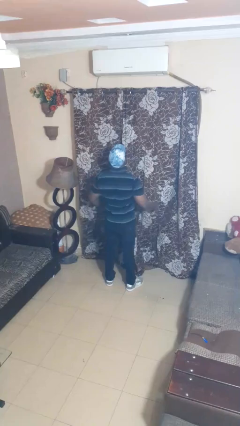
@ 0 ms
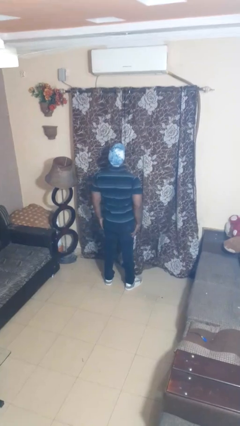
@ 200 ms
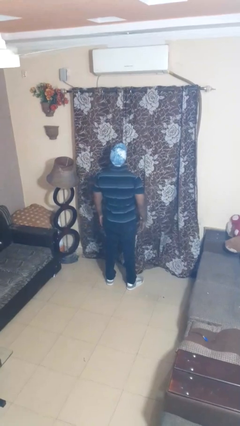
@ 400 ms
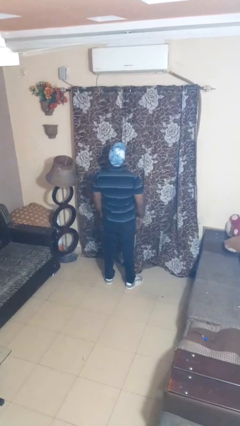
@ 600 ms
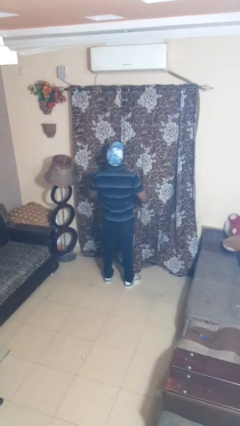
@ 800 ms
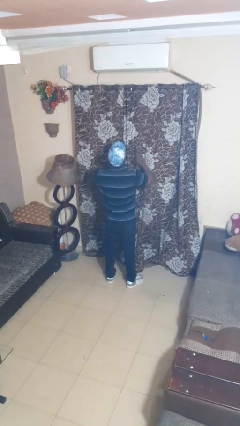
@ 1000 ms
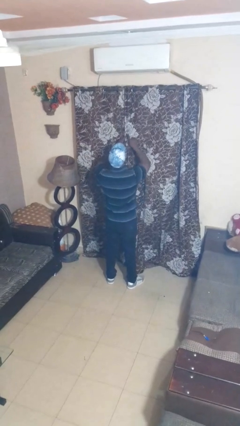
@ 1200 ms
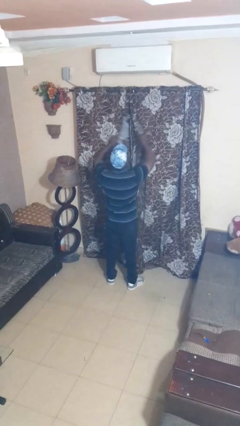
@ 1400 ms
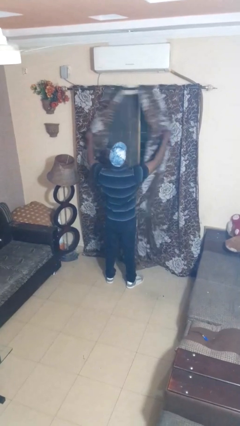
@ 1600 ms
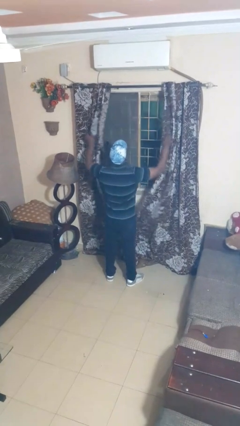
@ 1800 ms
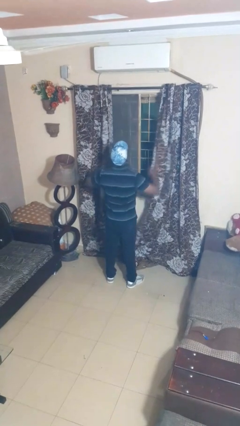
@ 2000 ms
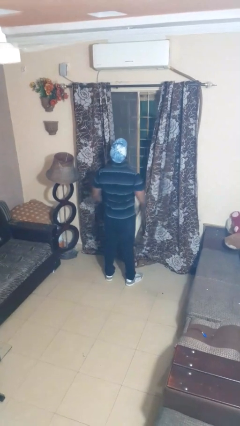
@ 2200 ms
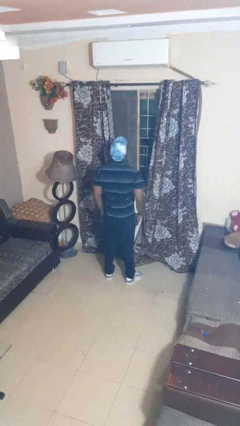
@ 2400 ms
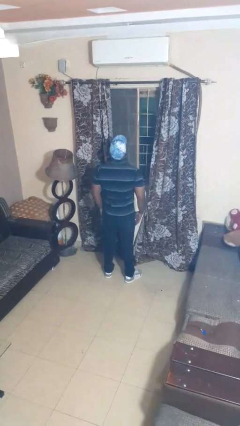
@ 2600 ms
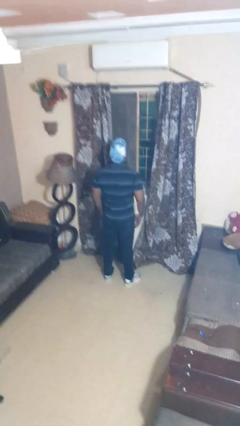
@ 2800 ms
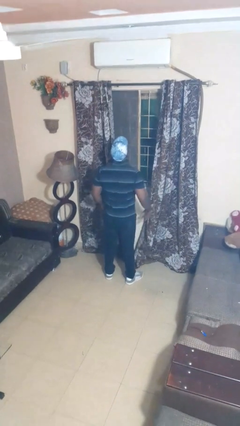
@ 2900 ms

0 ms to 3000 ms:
person opens curtains

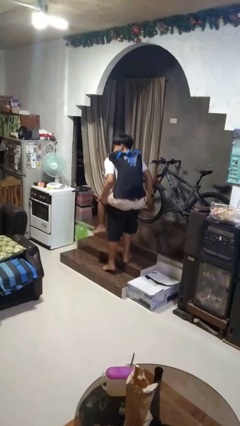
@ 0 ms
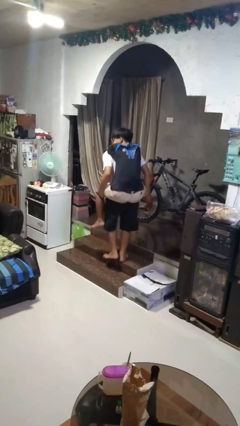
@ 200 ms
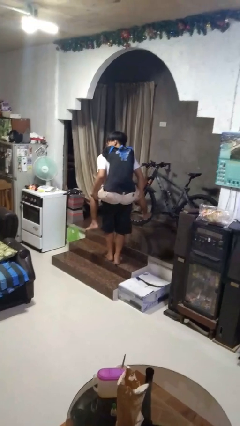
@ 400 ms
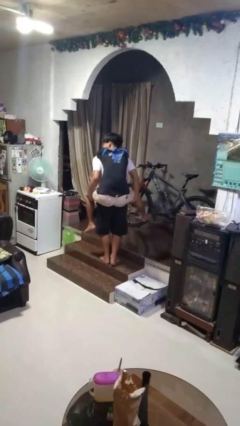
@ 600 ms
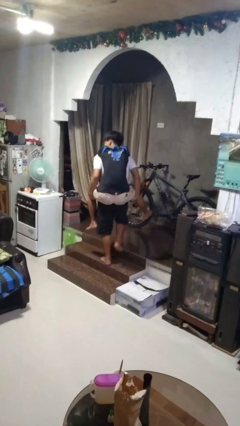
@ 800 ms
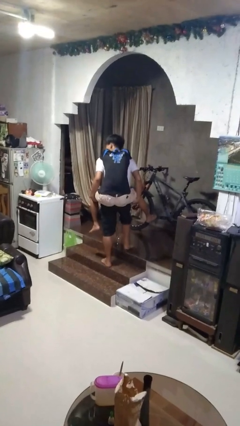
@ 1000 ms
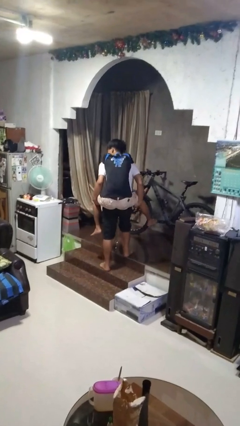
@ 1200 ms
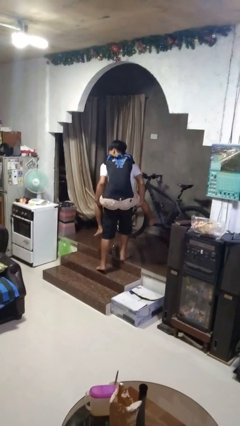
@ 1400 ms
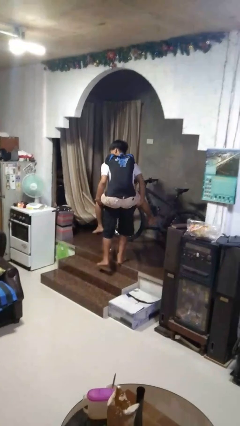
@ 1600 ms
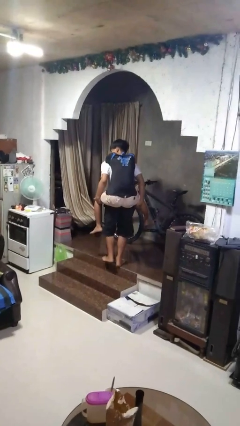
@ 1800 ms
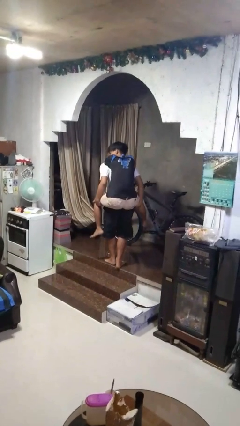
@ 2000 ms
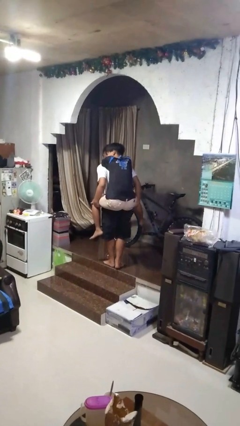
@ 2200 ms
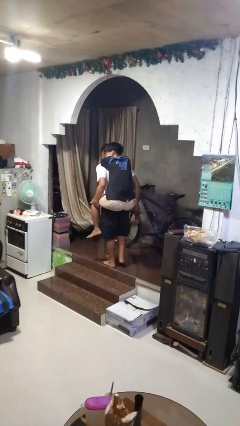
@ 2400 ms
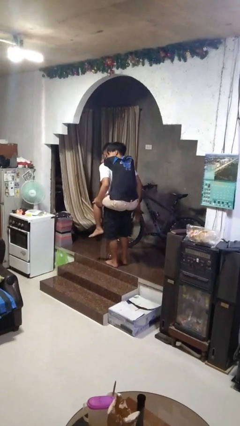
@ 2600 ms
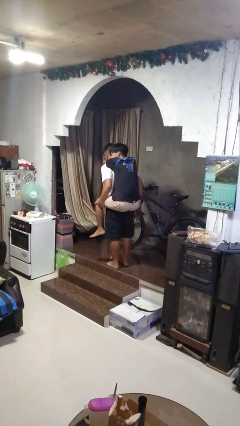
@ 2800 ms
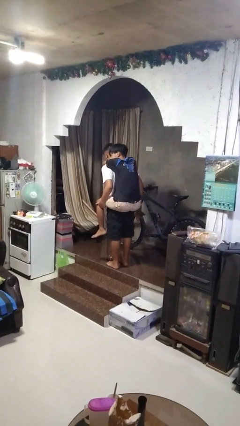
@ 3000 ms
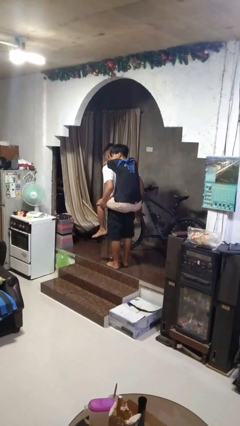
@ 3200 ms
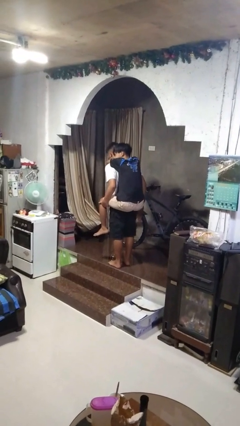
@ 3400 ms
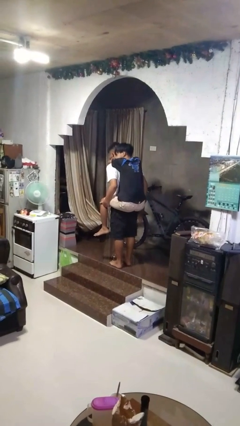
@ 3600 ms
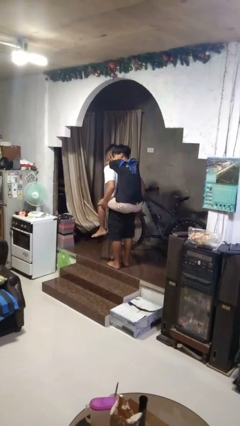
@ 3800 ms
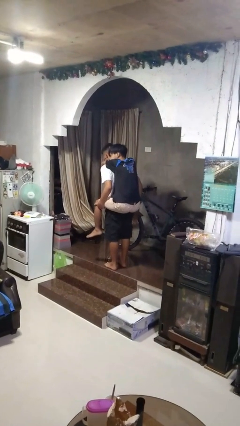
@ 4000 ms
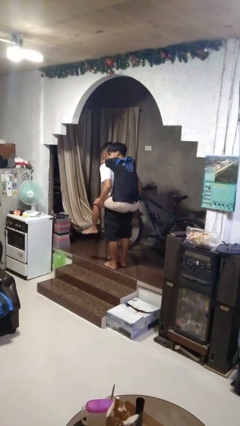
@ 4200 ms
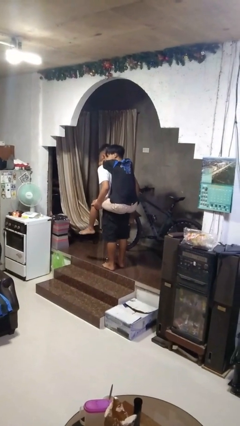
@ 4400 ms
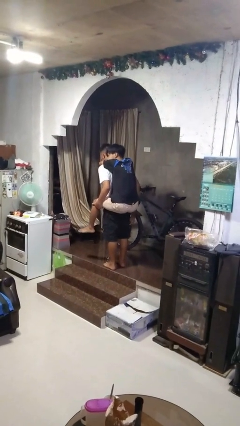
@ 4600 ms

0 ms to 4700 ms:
person carries person on back

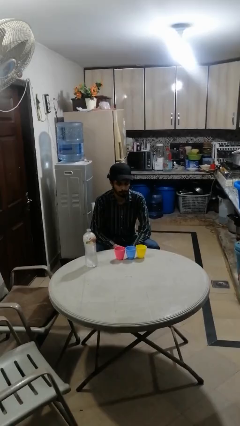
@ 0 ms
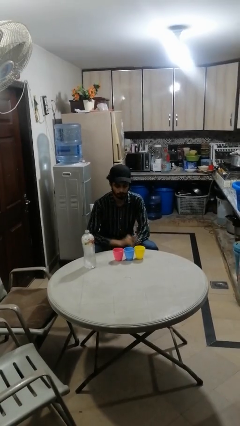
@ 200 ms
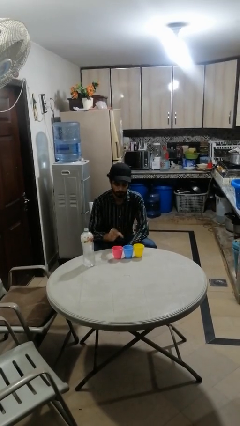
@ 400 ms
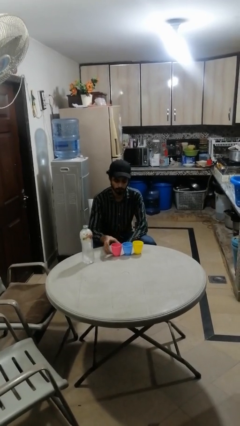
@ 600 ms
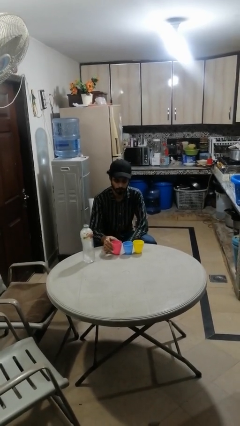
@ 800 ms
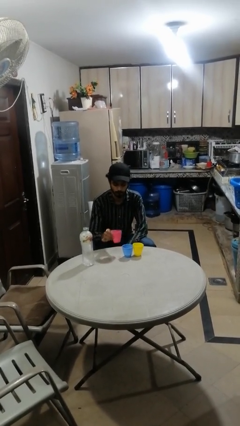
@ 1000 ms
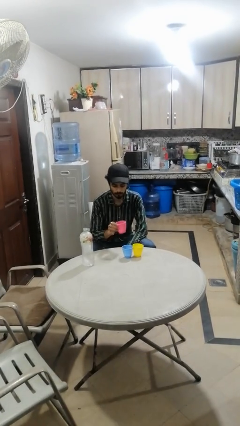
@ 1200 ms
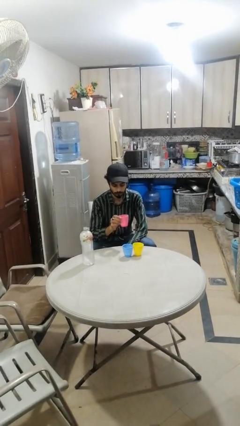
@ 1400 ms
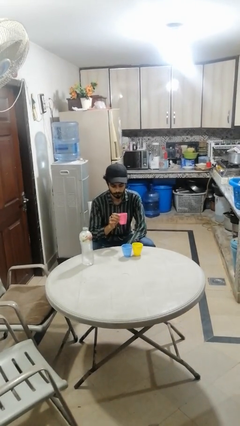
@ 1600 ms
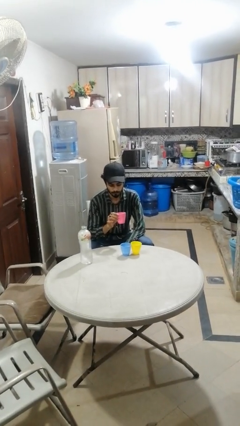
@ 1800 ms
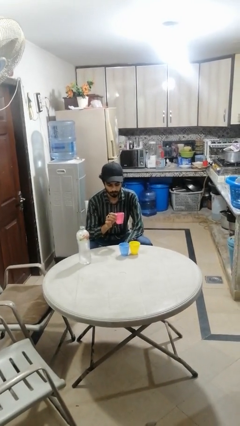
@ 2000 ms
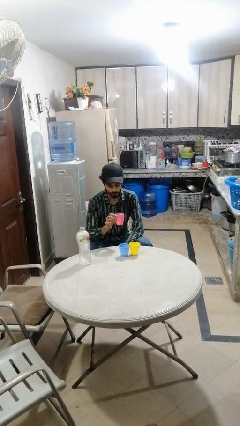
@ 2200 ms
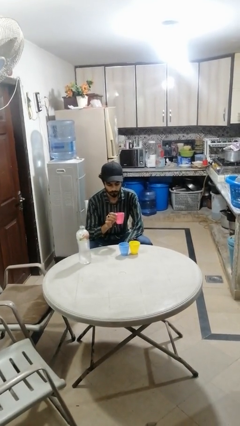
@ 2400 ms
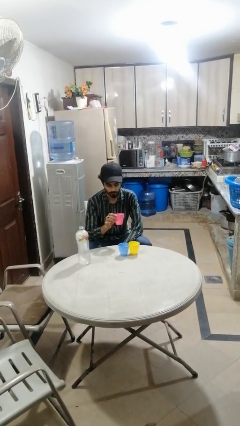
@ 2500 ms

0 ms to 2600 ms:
person picks up object from table

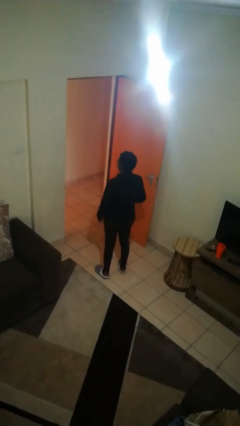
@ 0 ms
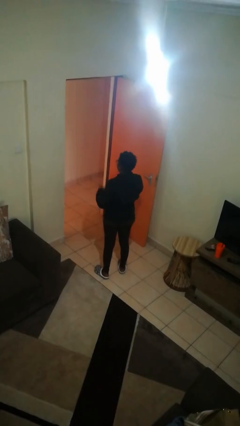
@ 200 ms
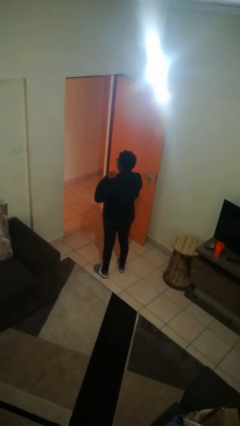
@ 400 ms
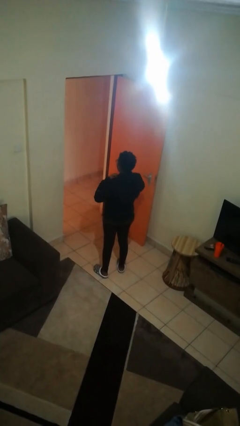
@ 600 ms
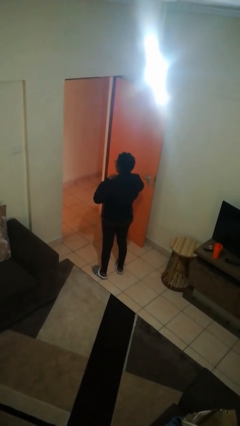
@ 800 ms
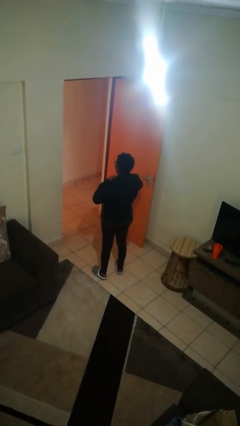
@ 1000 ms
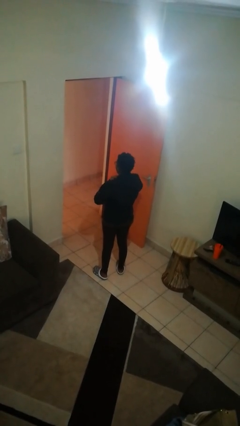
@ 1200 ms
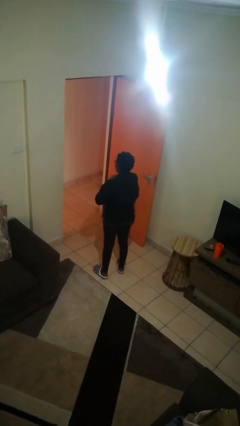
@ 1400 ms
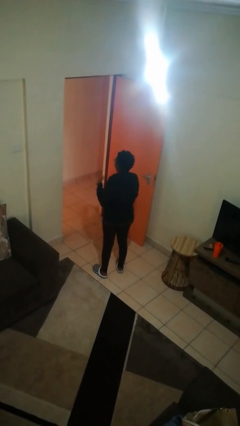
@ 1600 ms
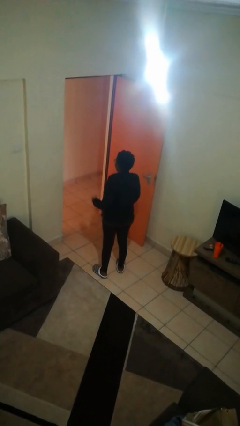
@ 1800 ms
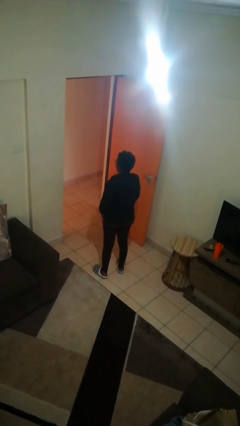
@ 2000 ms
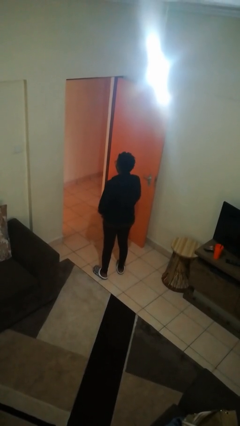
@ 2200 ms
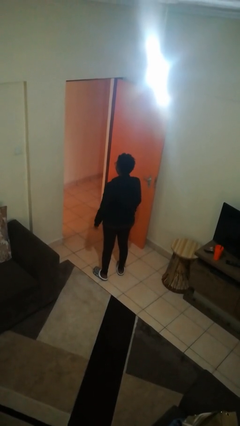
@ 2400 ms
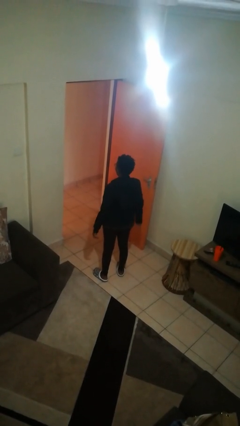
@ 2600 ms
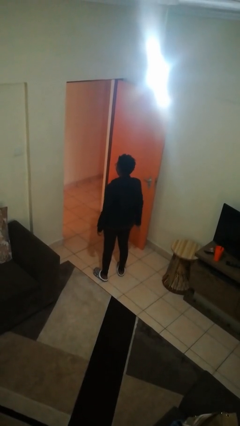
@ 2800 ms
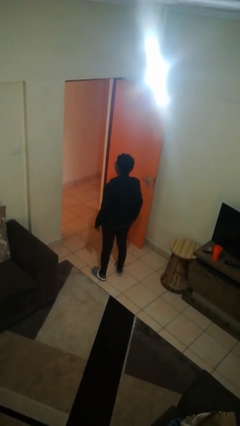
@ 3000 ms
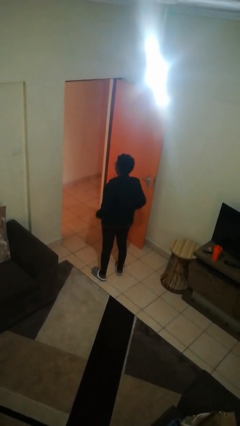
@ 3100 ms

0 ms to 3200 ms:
person unzips jacket

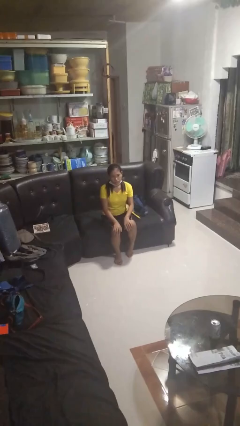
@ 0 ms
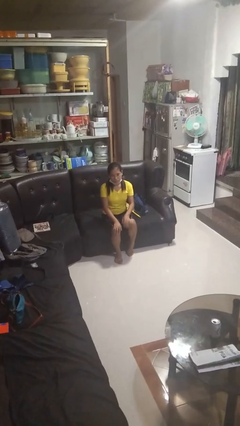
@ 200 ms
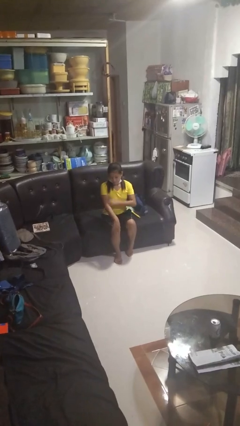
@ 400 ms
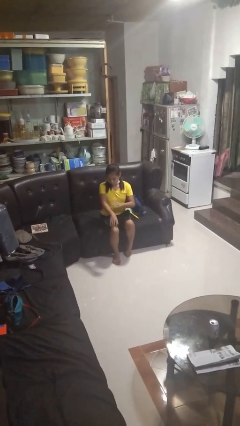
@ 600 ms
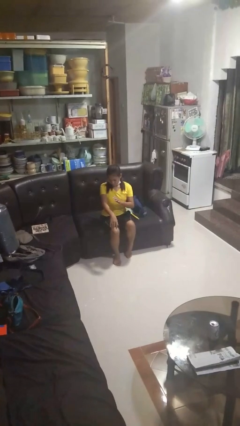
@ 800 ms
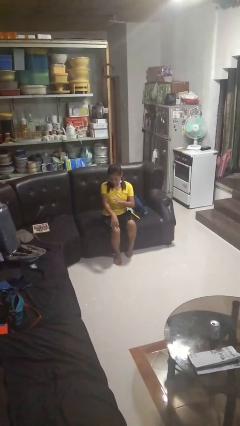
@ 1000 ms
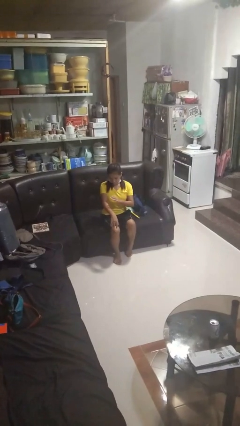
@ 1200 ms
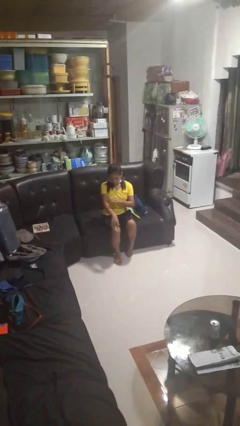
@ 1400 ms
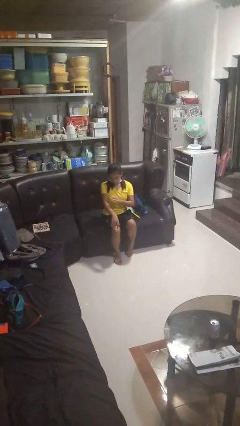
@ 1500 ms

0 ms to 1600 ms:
person swats bug

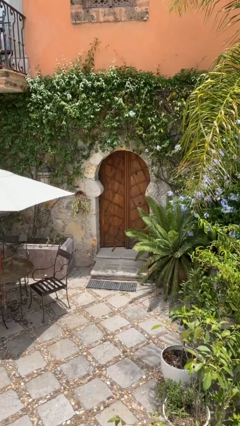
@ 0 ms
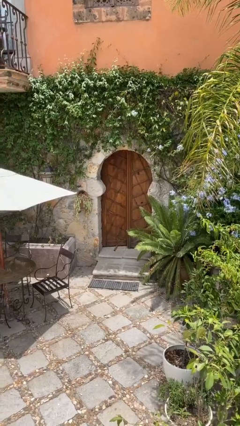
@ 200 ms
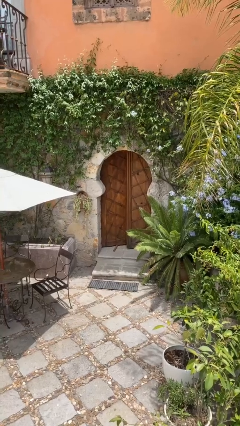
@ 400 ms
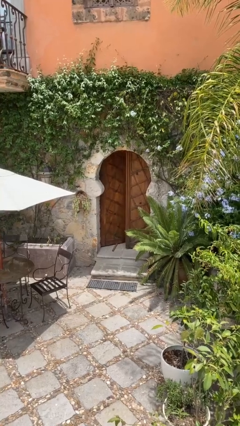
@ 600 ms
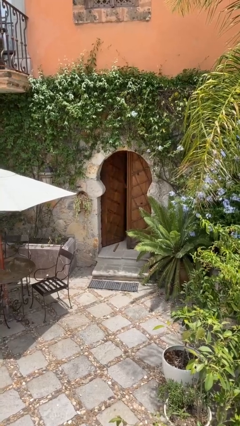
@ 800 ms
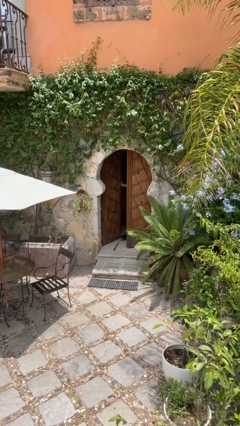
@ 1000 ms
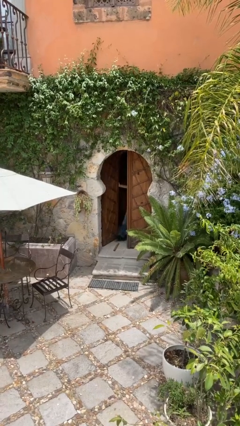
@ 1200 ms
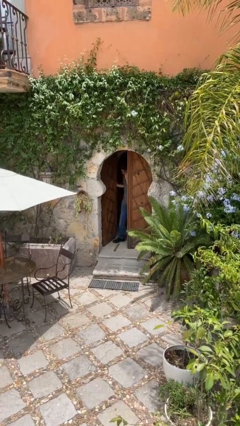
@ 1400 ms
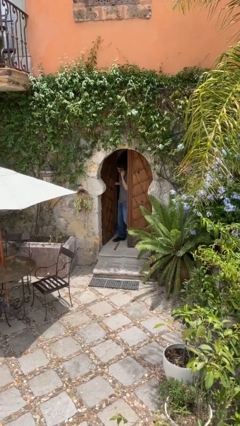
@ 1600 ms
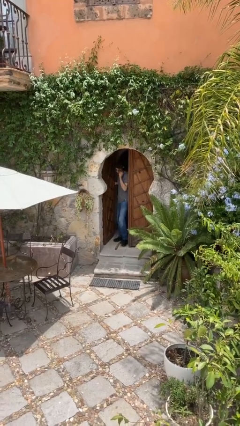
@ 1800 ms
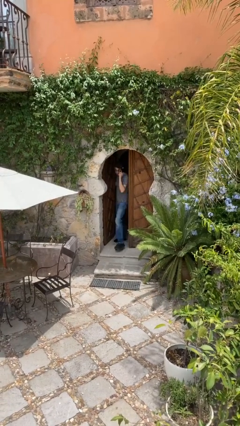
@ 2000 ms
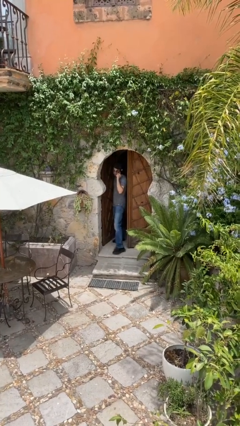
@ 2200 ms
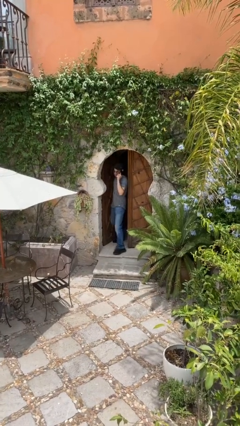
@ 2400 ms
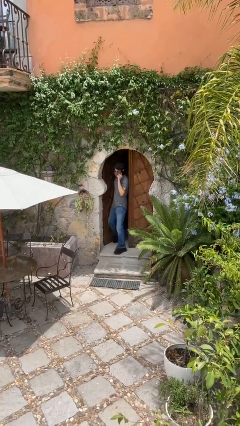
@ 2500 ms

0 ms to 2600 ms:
person opens facility door
